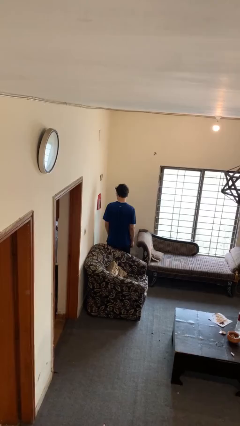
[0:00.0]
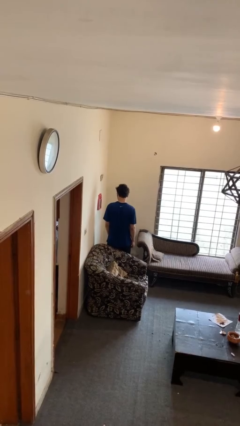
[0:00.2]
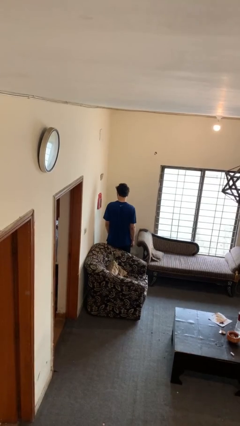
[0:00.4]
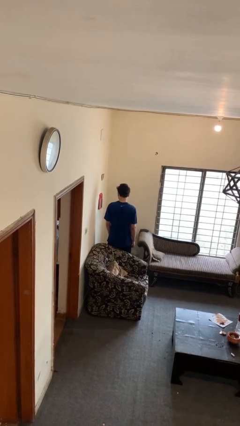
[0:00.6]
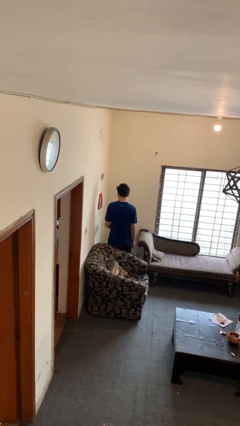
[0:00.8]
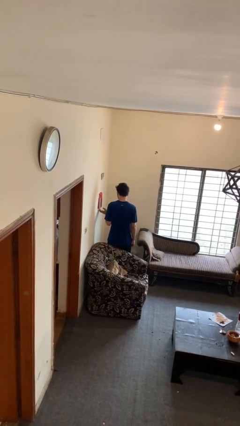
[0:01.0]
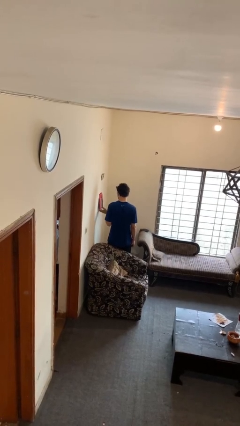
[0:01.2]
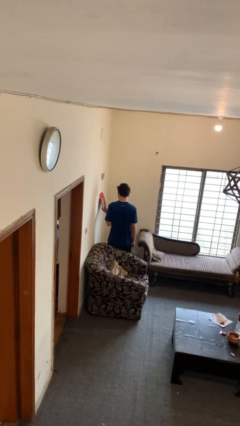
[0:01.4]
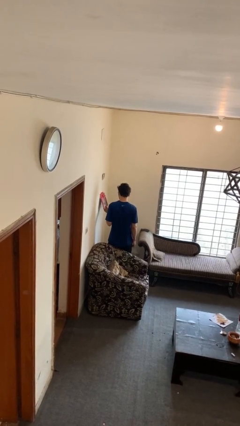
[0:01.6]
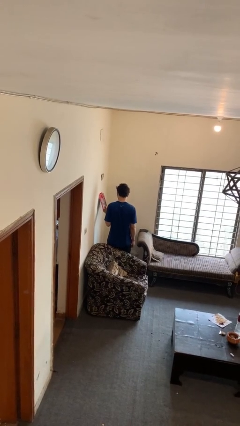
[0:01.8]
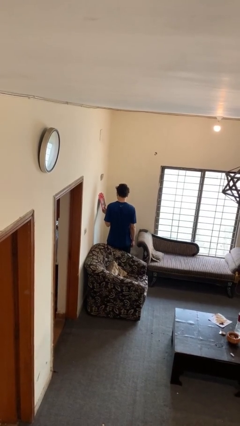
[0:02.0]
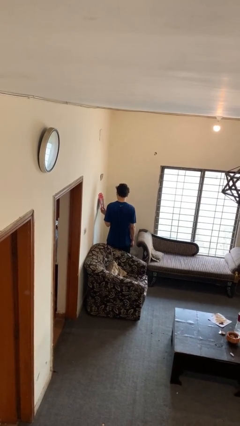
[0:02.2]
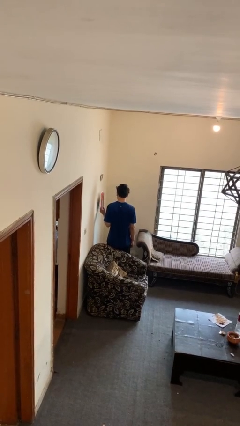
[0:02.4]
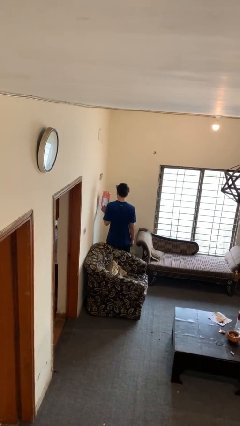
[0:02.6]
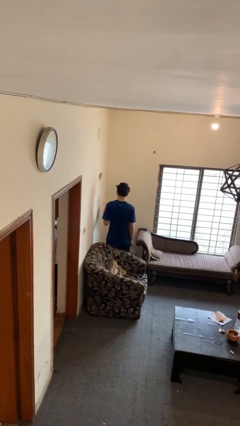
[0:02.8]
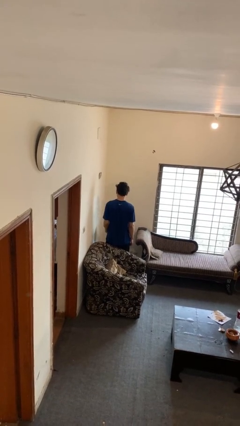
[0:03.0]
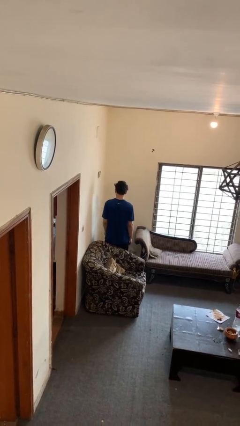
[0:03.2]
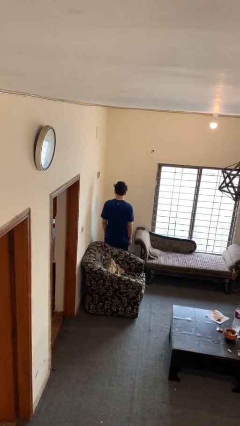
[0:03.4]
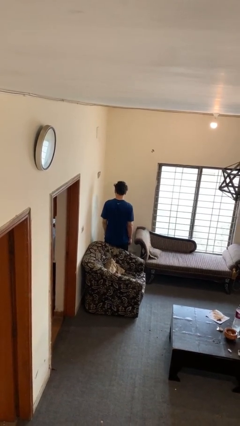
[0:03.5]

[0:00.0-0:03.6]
person takes down picture frame

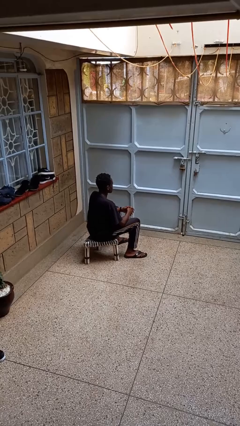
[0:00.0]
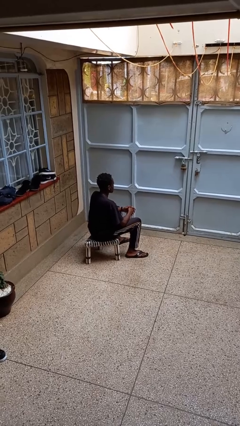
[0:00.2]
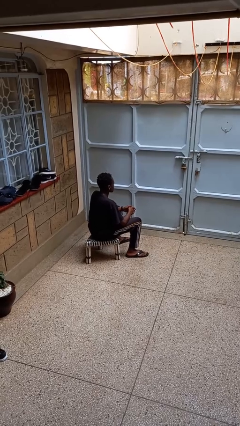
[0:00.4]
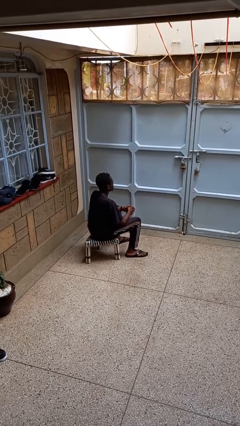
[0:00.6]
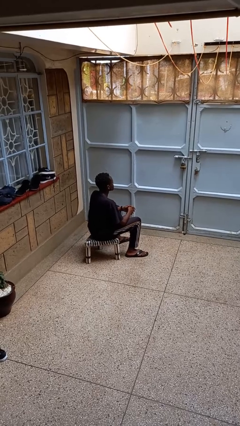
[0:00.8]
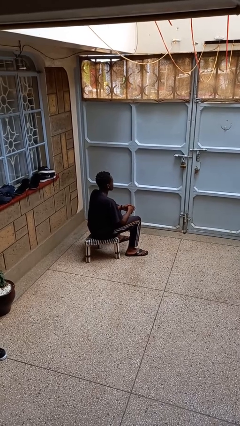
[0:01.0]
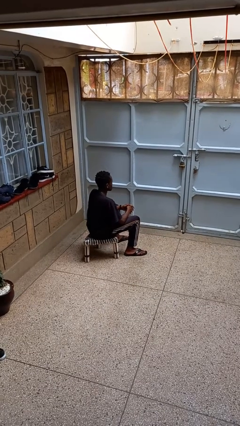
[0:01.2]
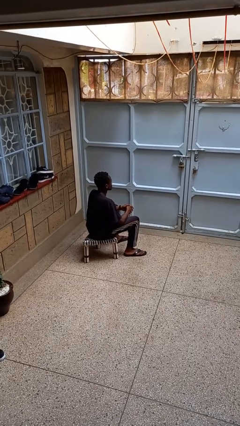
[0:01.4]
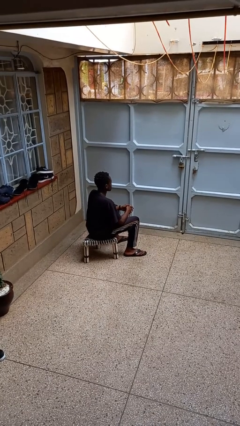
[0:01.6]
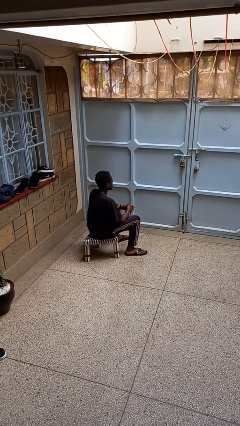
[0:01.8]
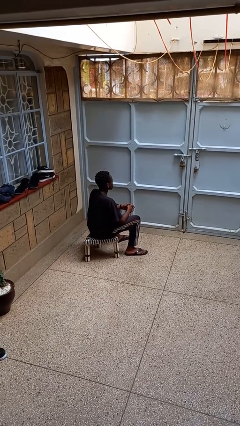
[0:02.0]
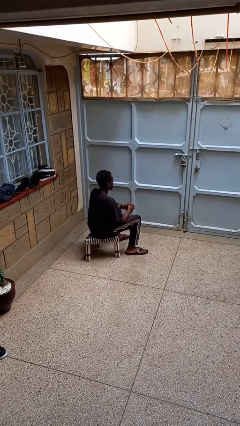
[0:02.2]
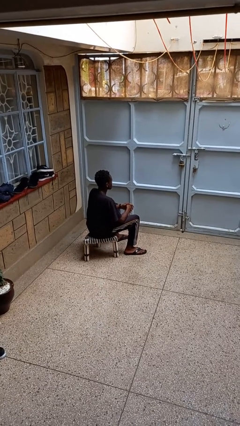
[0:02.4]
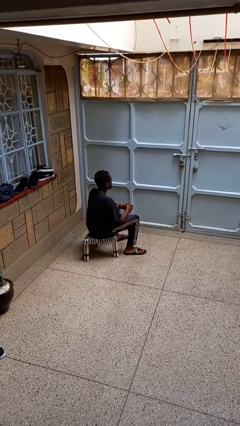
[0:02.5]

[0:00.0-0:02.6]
person nods head

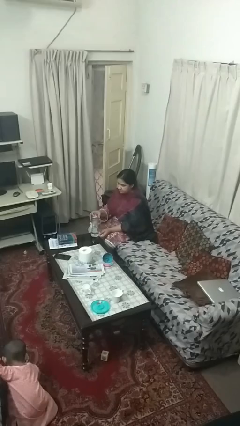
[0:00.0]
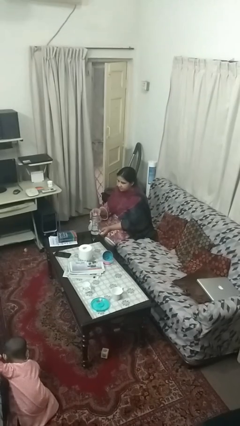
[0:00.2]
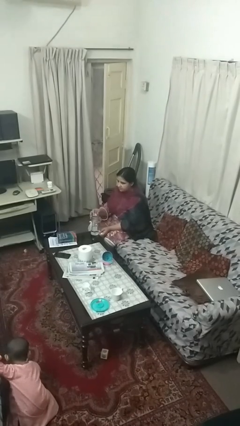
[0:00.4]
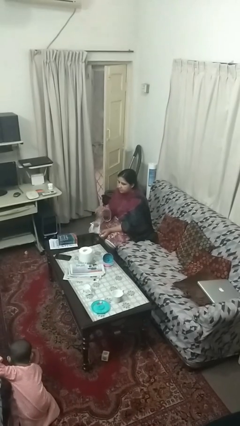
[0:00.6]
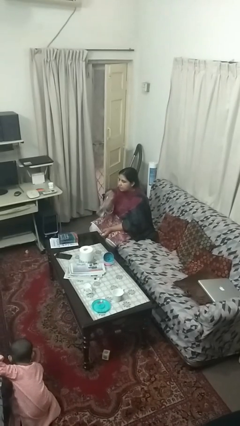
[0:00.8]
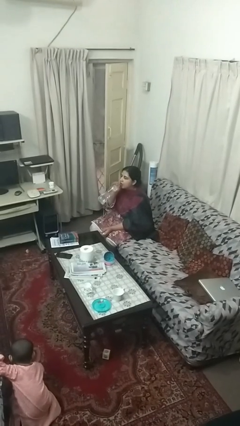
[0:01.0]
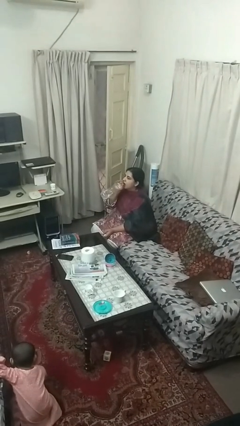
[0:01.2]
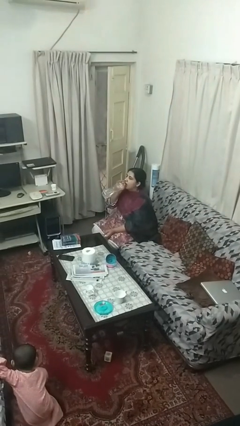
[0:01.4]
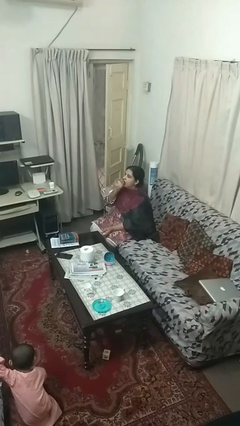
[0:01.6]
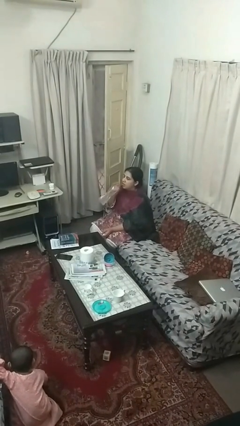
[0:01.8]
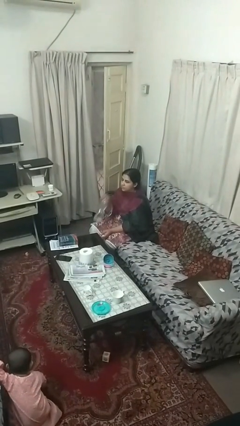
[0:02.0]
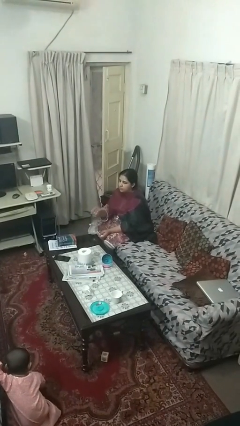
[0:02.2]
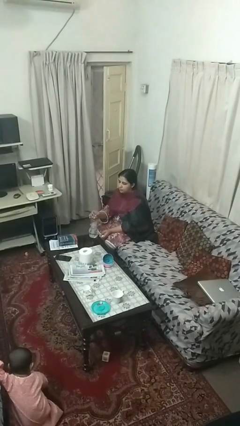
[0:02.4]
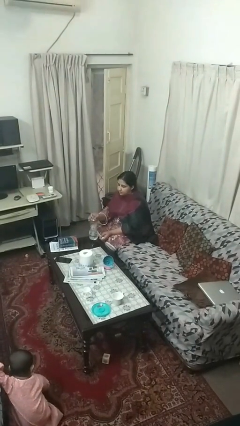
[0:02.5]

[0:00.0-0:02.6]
person drinks from bottle

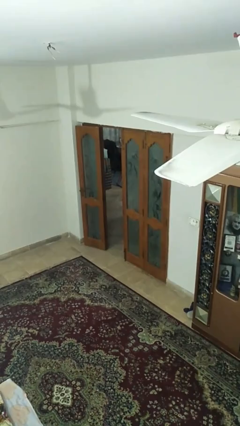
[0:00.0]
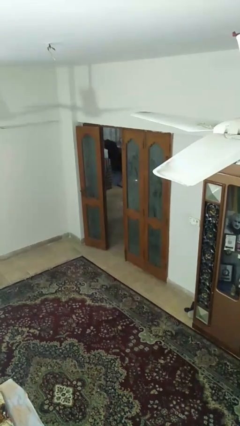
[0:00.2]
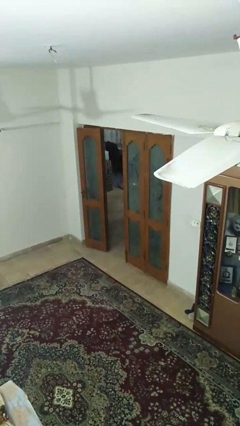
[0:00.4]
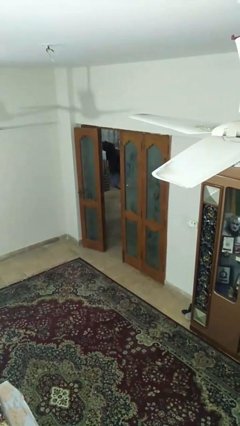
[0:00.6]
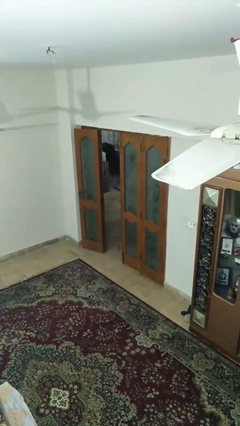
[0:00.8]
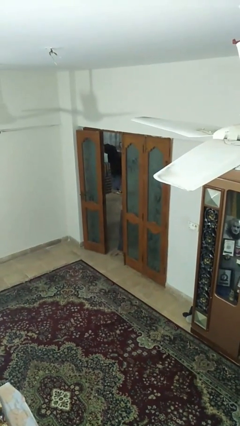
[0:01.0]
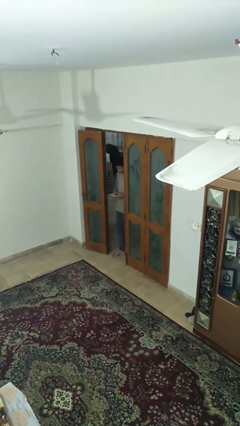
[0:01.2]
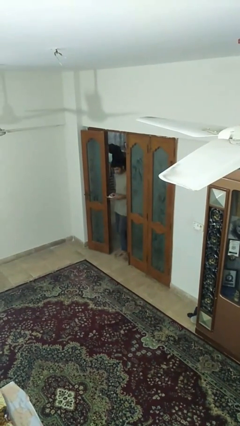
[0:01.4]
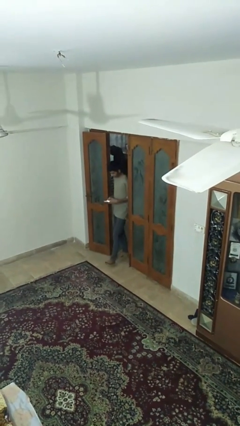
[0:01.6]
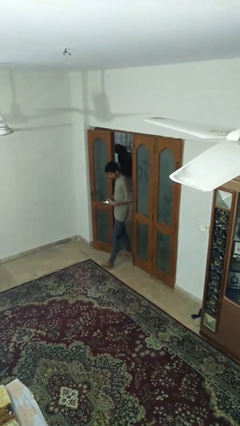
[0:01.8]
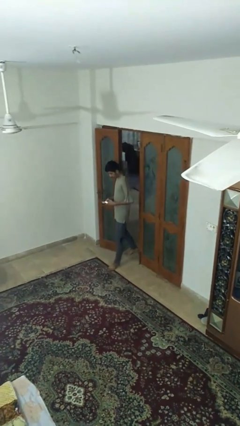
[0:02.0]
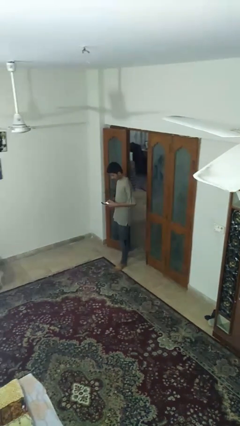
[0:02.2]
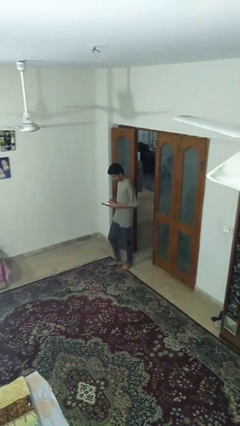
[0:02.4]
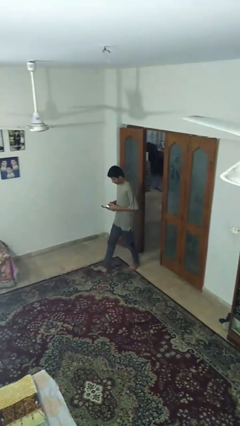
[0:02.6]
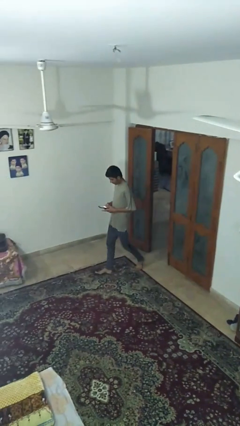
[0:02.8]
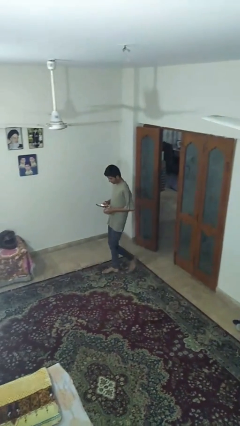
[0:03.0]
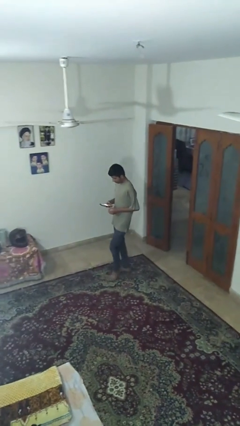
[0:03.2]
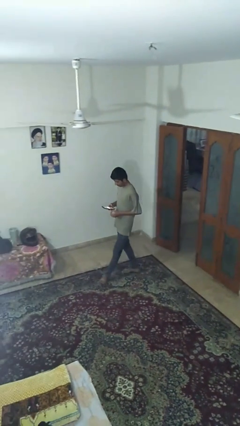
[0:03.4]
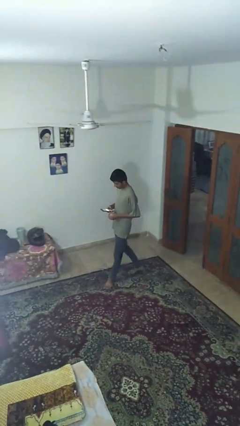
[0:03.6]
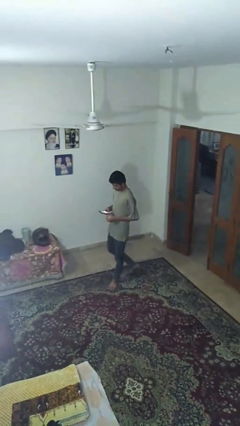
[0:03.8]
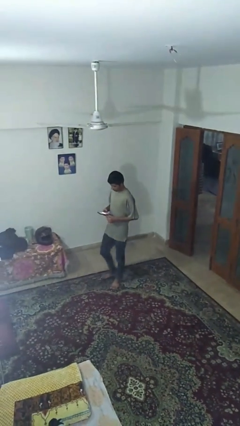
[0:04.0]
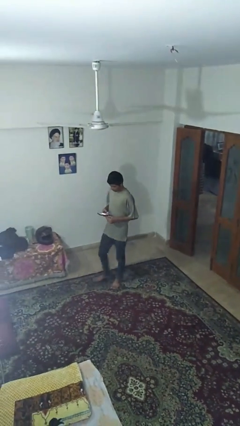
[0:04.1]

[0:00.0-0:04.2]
person enters scene through structure

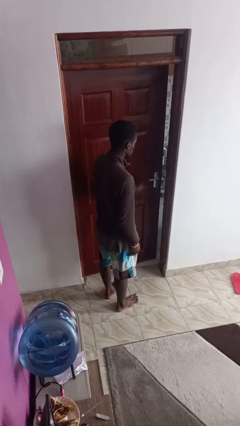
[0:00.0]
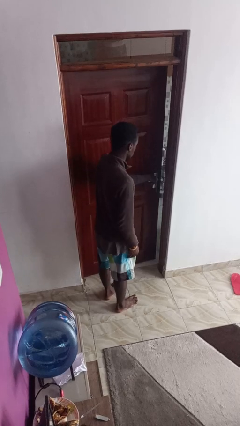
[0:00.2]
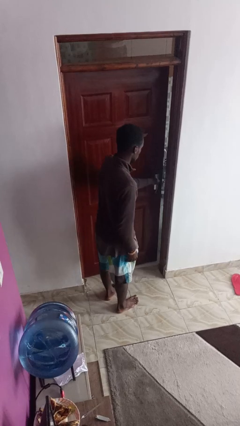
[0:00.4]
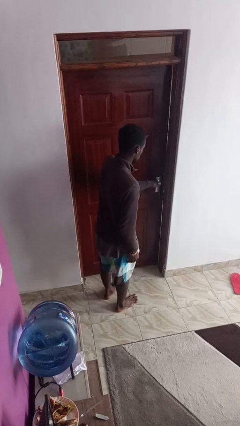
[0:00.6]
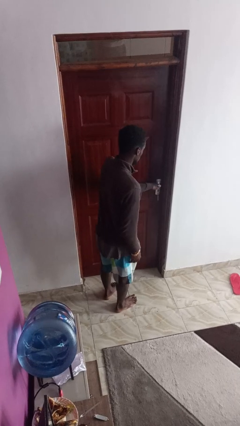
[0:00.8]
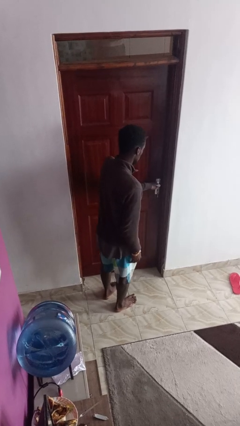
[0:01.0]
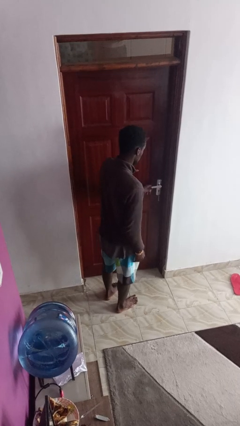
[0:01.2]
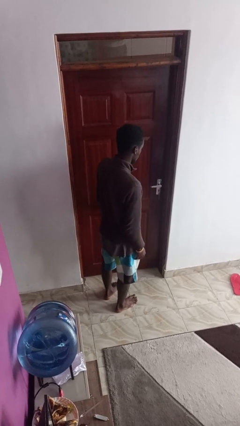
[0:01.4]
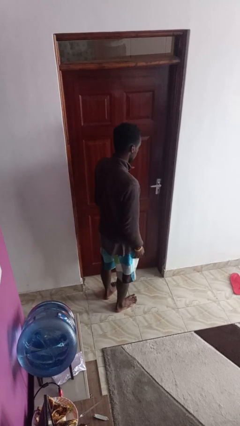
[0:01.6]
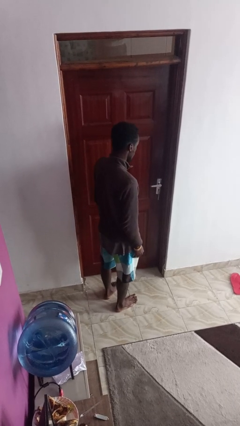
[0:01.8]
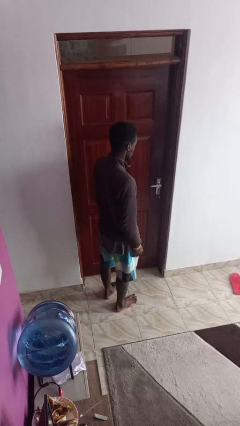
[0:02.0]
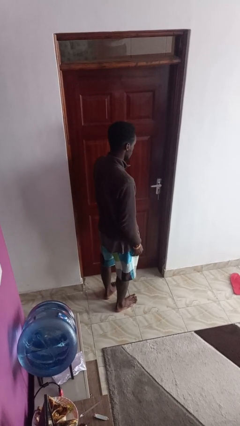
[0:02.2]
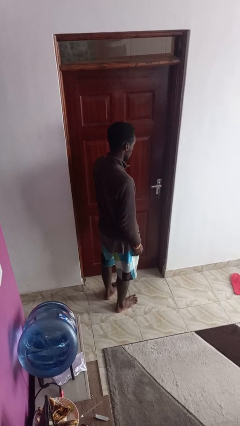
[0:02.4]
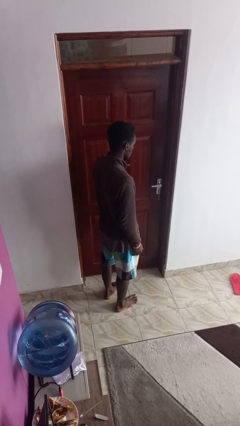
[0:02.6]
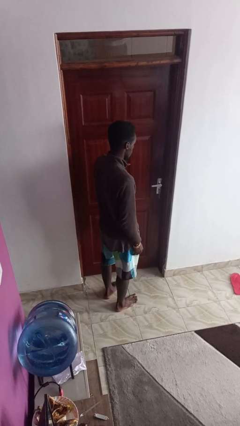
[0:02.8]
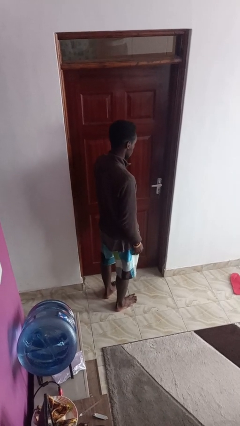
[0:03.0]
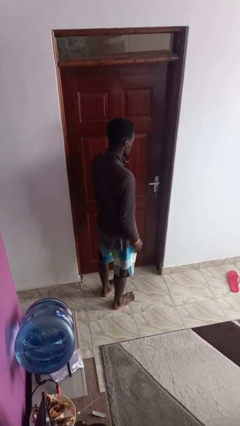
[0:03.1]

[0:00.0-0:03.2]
person closes facility door

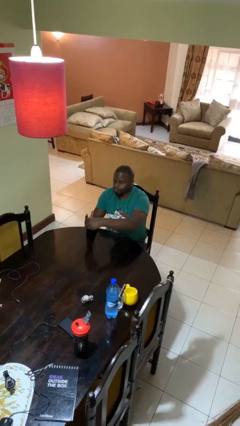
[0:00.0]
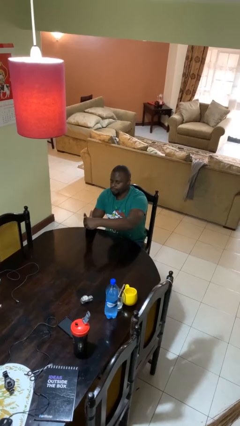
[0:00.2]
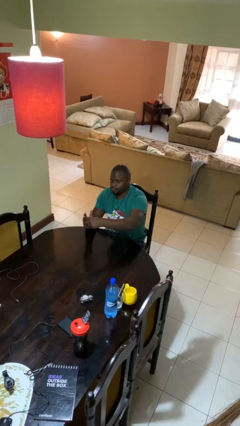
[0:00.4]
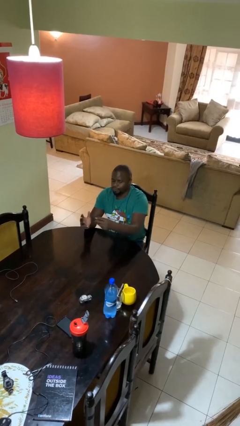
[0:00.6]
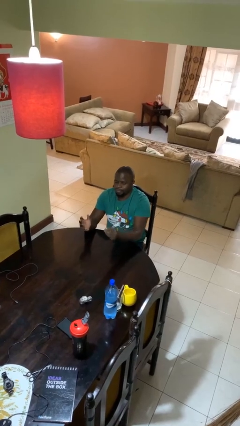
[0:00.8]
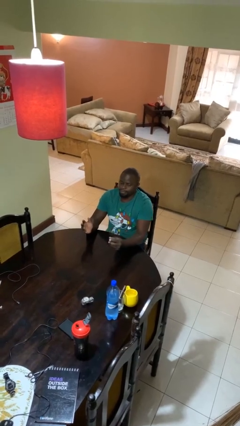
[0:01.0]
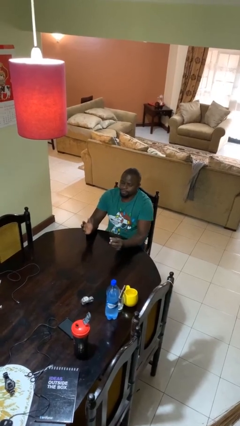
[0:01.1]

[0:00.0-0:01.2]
person takes off ring
